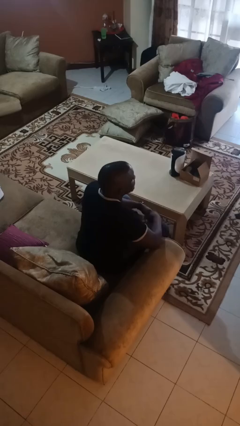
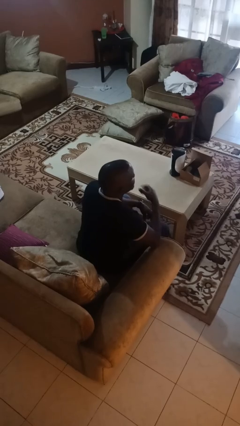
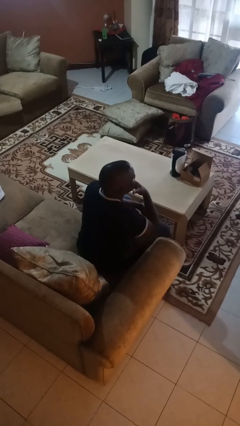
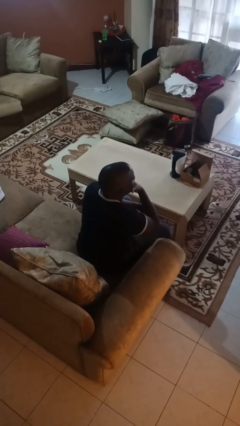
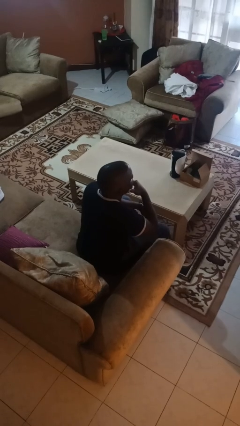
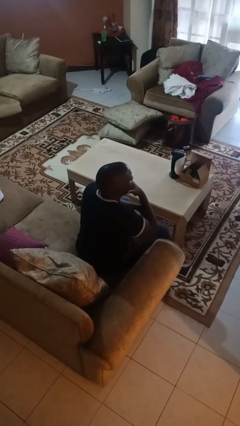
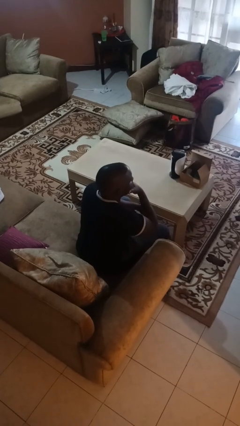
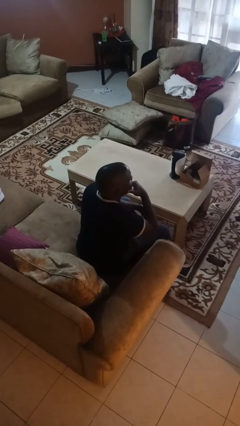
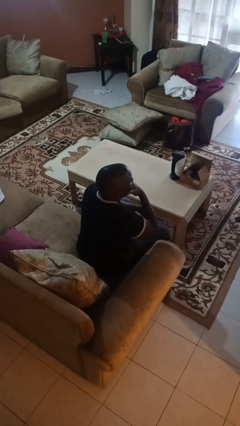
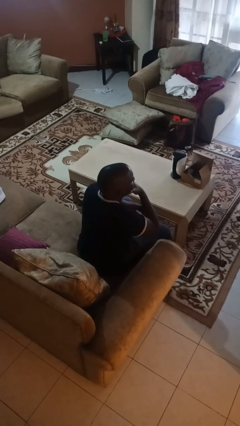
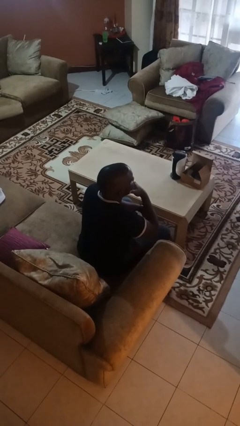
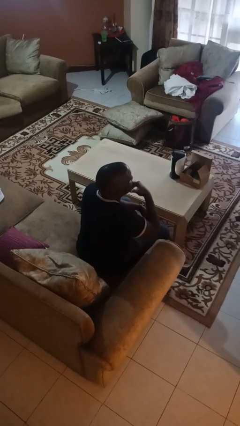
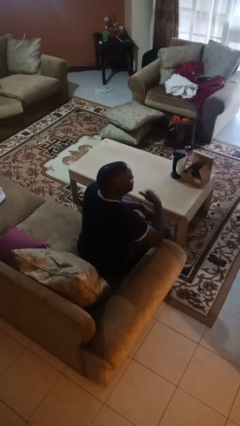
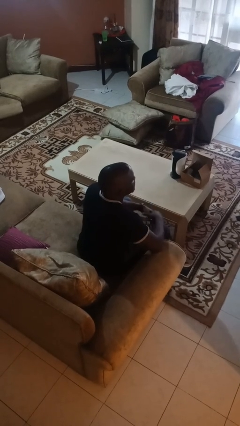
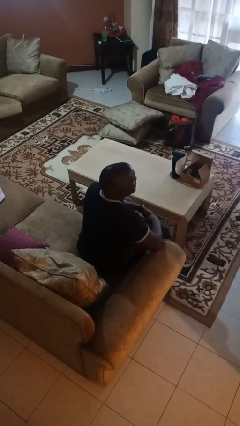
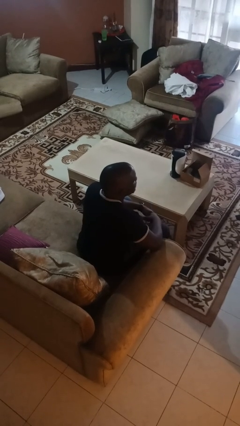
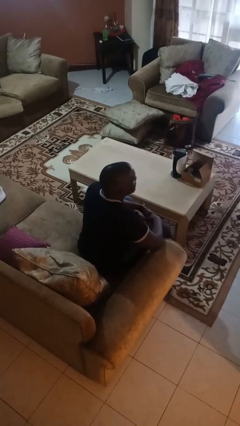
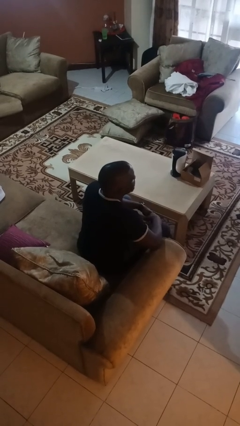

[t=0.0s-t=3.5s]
person strokes chin

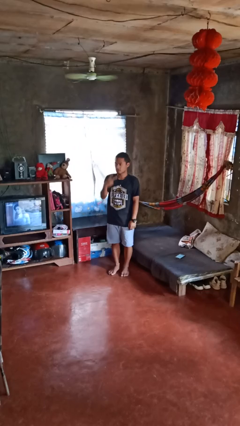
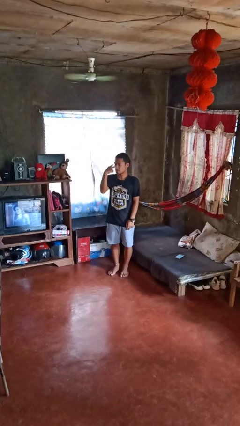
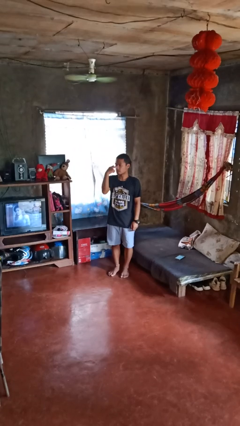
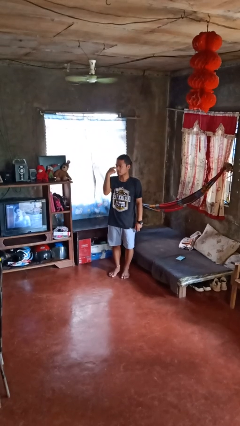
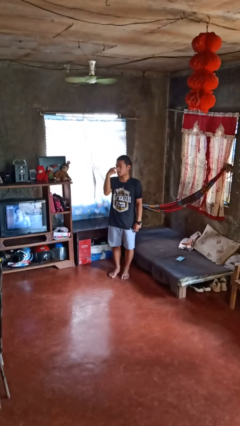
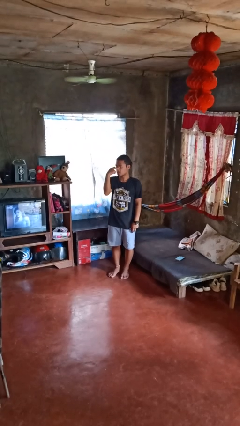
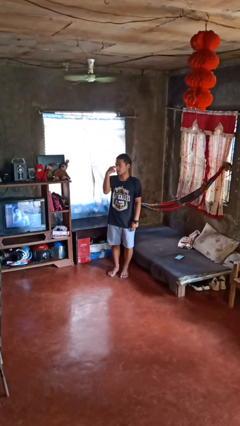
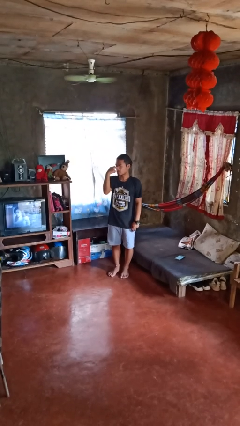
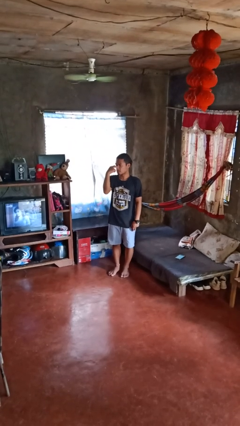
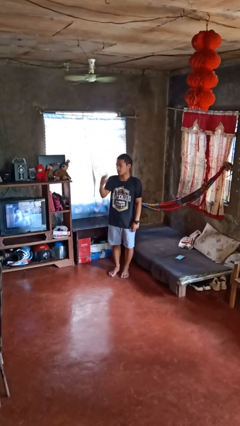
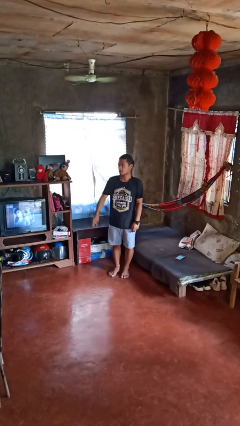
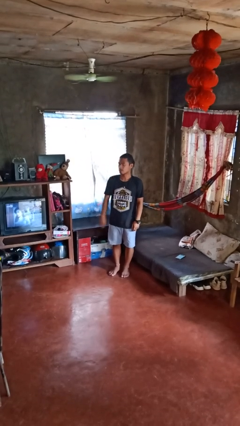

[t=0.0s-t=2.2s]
person gestures watch closely

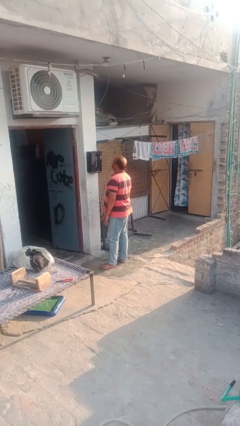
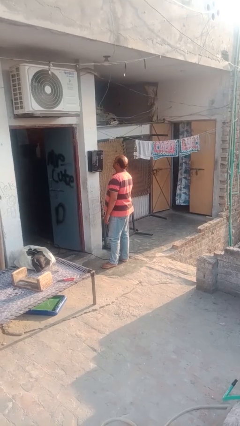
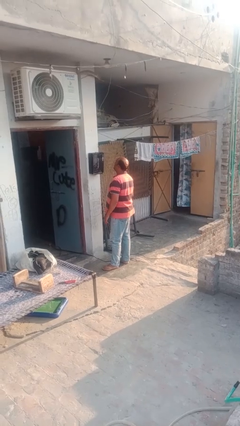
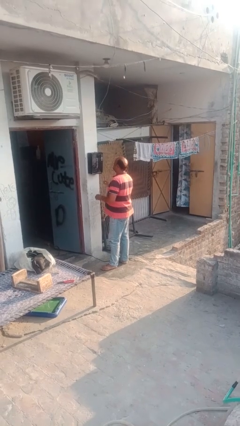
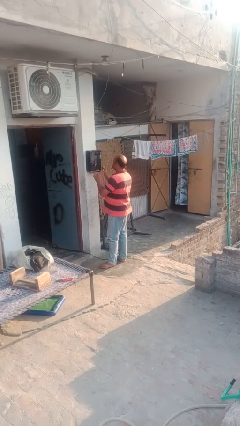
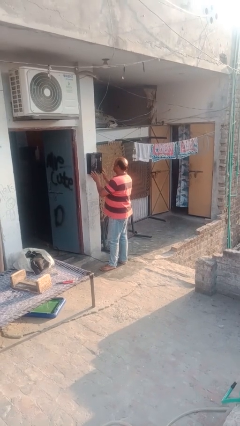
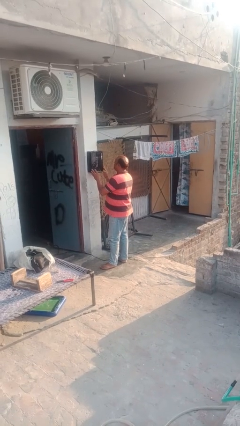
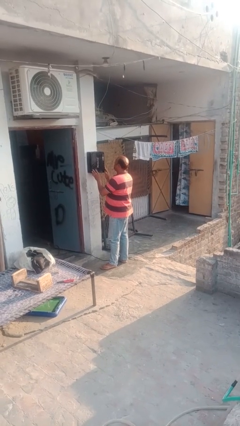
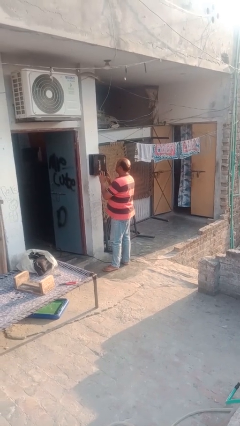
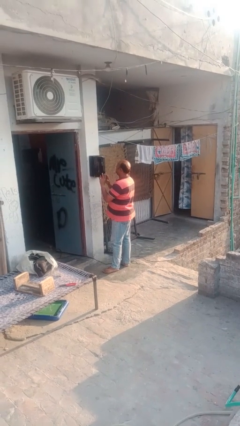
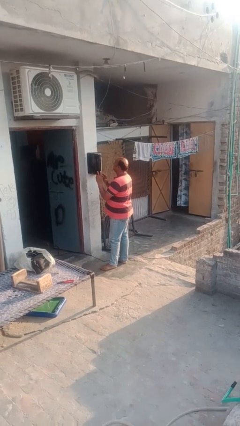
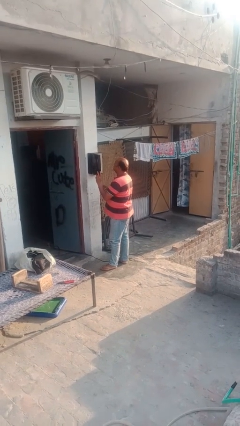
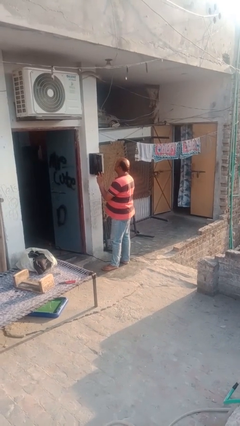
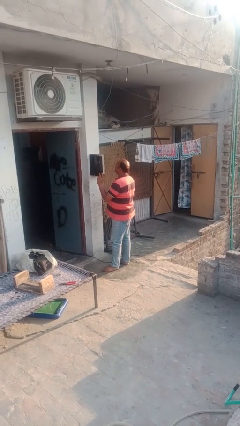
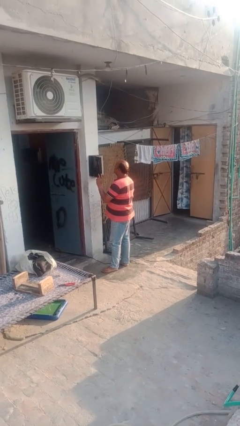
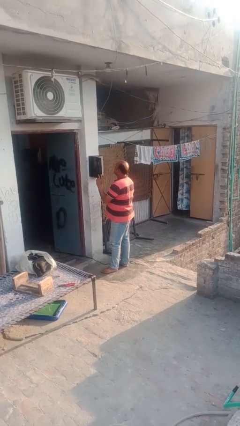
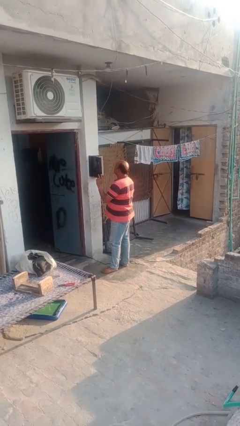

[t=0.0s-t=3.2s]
person opens mailbox

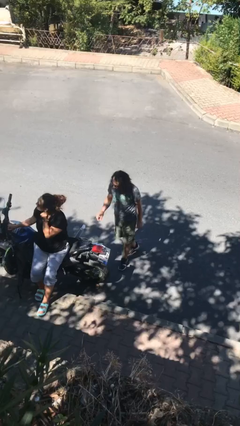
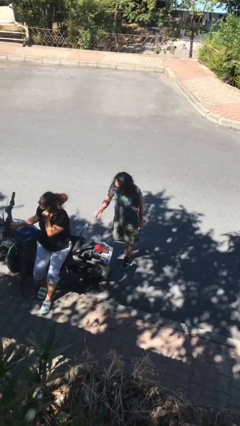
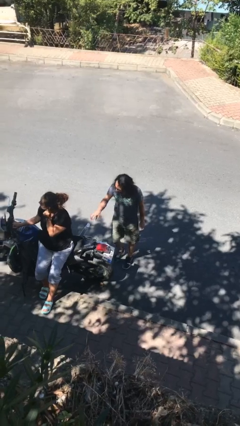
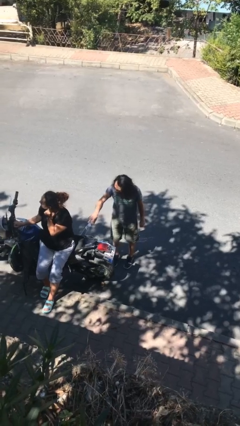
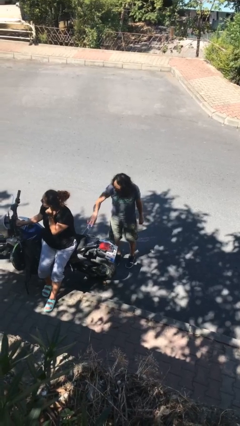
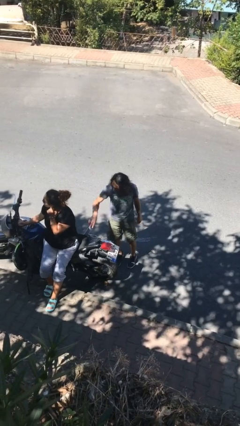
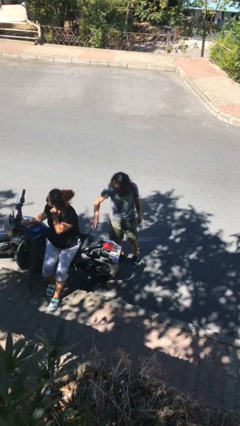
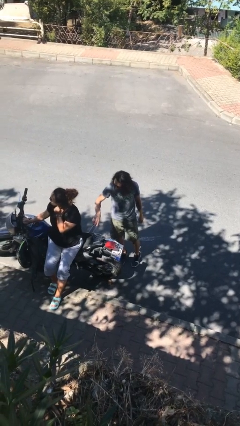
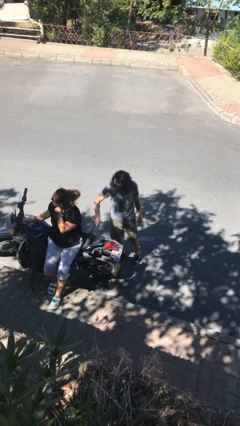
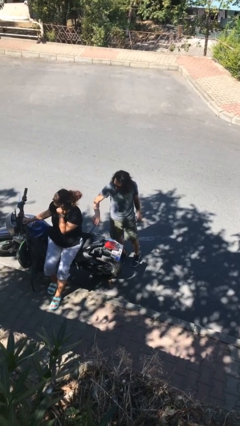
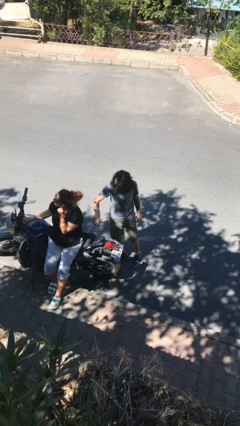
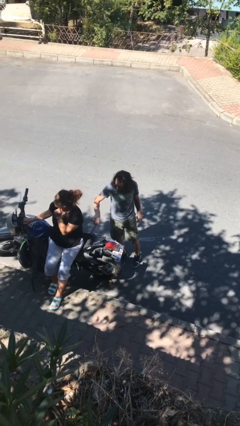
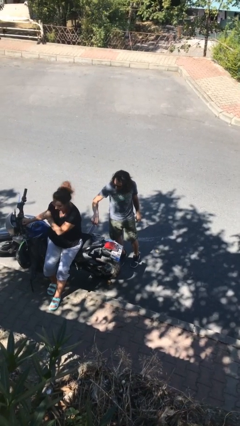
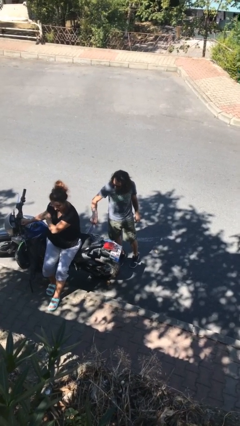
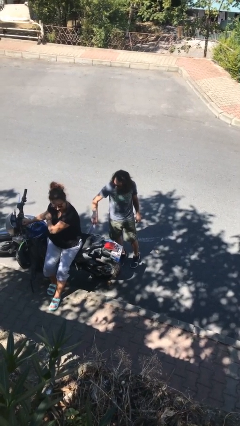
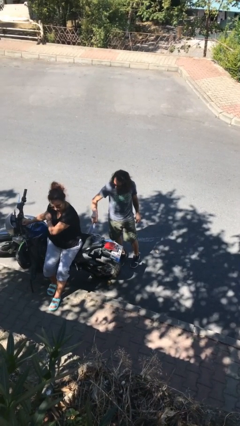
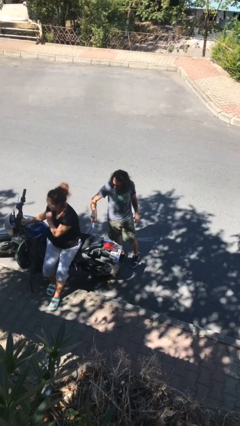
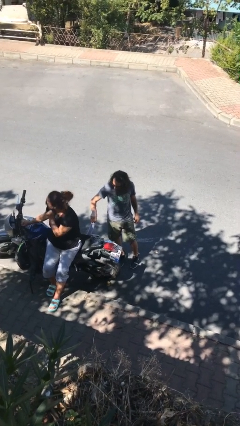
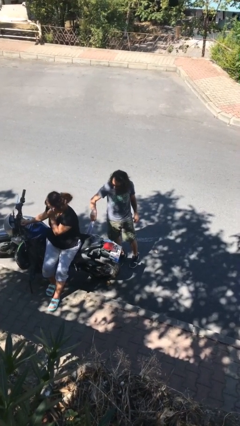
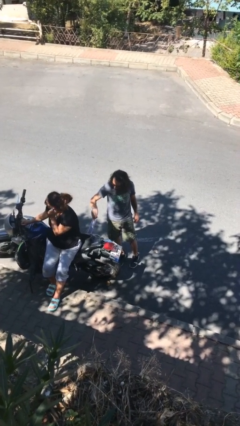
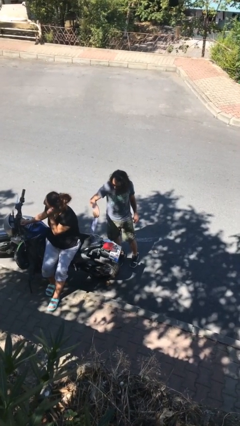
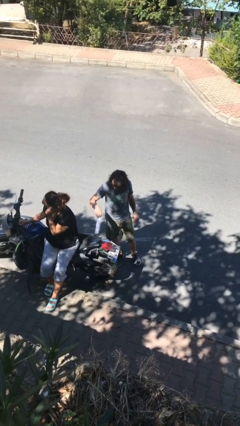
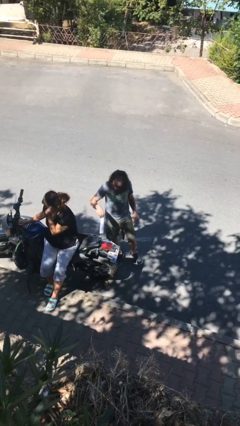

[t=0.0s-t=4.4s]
person steals object from person

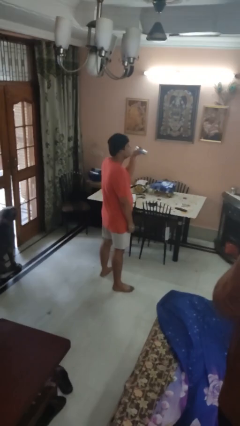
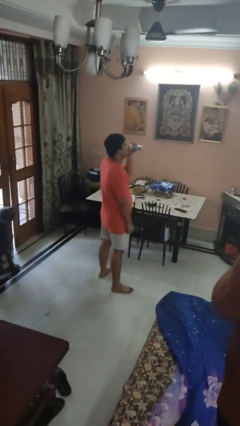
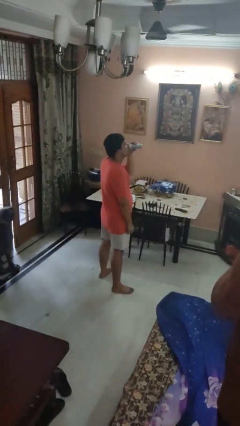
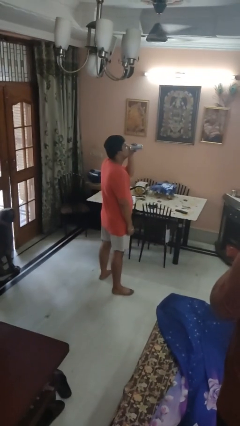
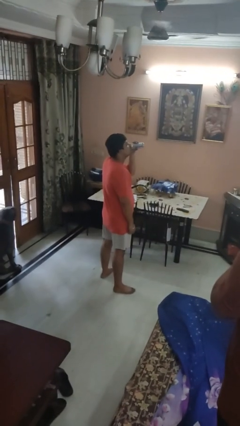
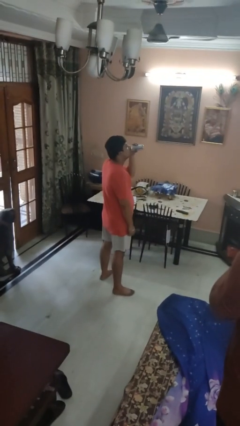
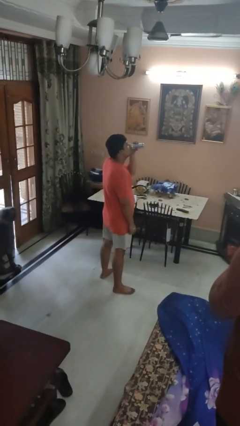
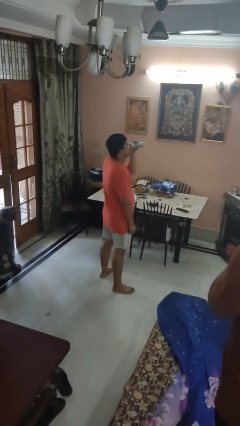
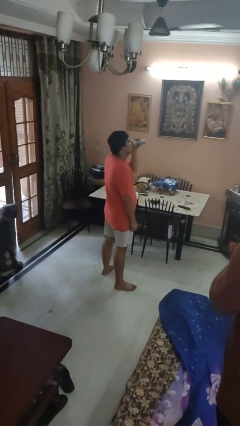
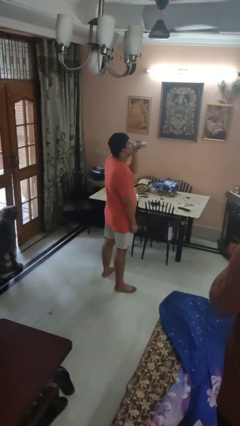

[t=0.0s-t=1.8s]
person drinks from beverage can

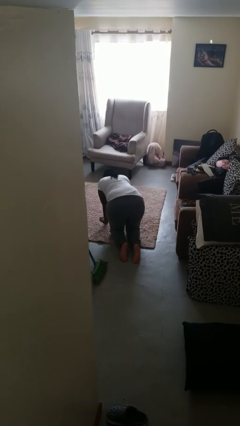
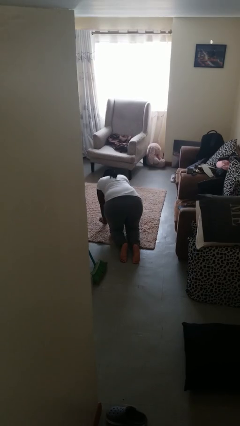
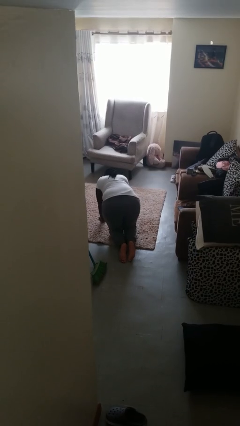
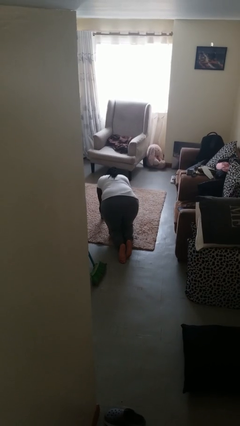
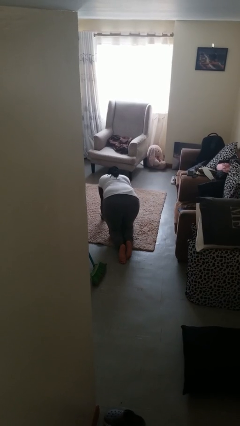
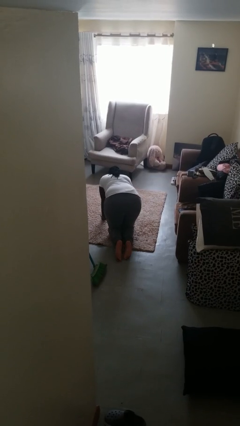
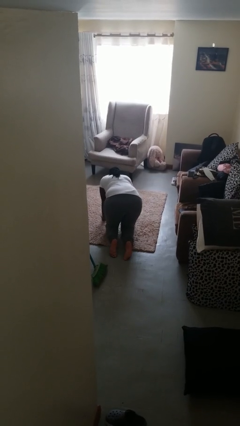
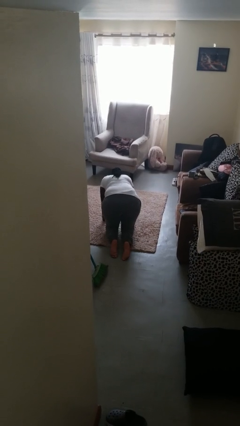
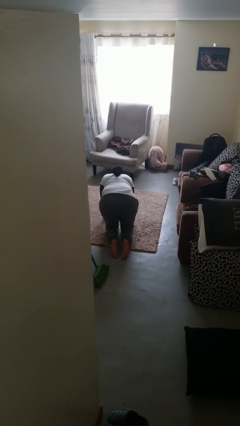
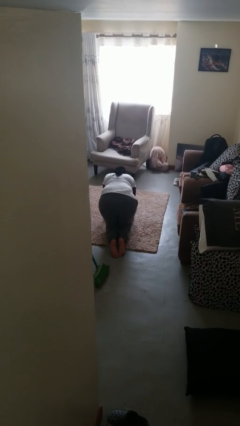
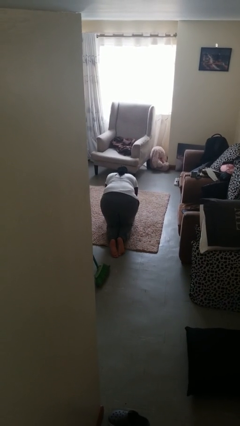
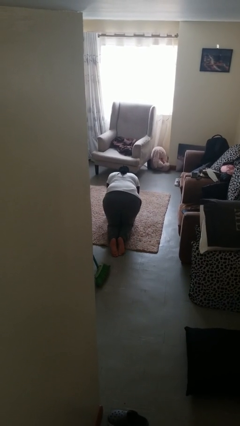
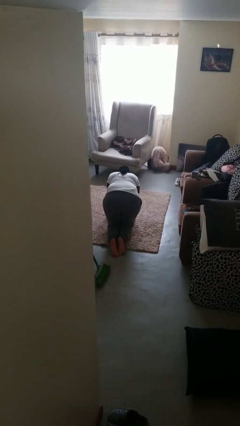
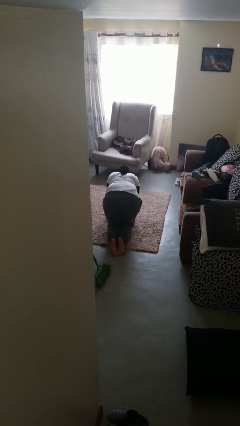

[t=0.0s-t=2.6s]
person crawls
